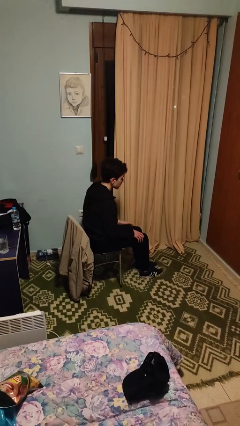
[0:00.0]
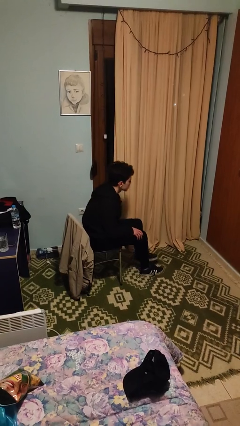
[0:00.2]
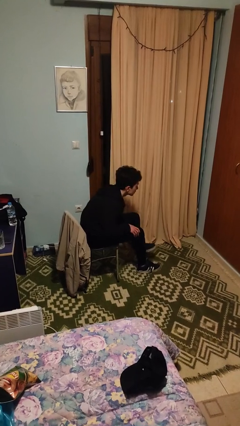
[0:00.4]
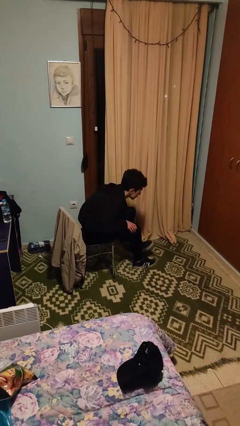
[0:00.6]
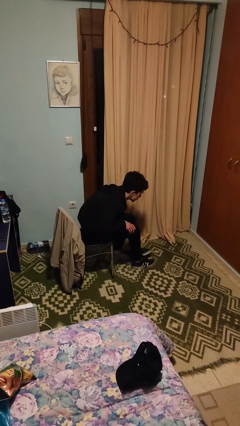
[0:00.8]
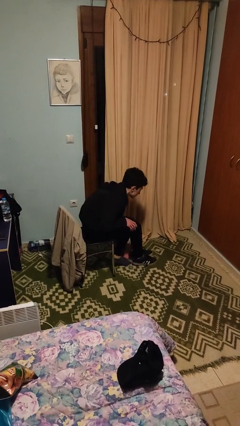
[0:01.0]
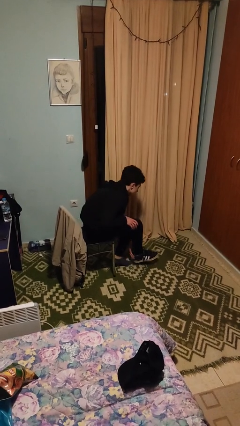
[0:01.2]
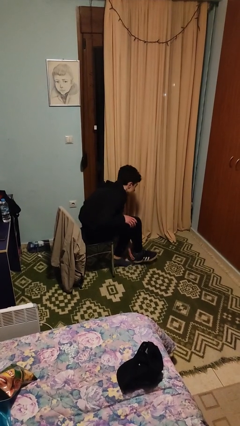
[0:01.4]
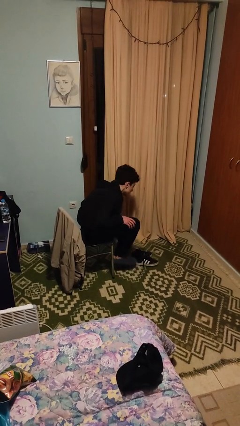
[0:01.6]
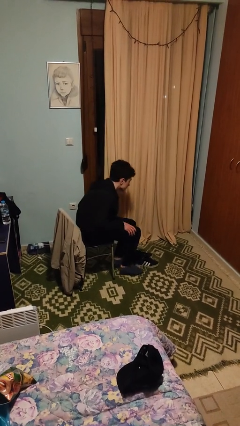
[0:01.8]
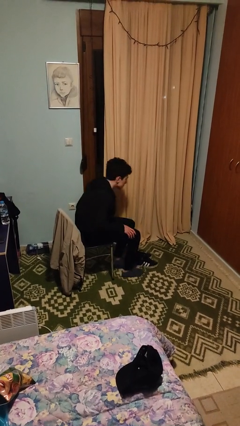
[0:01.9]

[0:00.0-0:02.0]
person takes off shoes

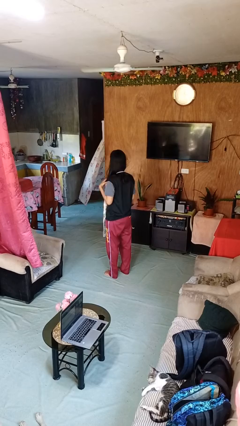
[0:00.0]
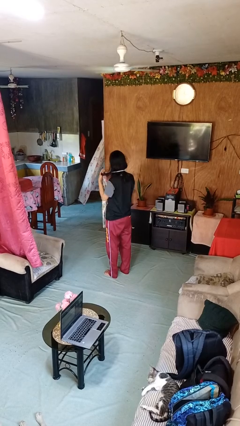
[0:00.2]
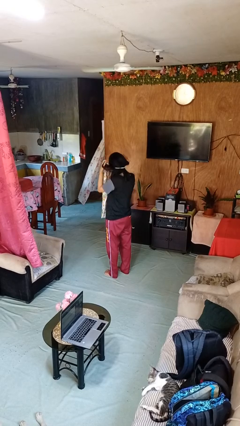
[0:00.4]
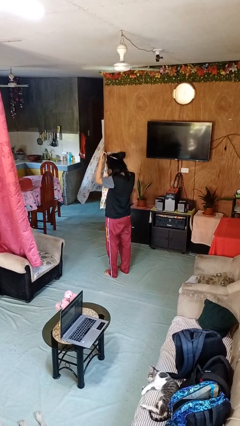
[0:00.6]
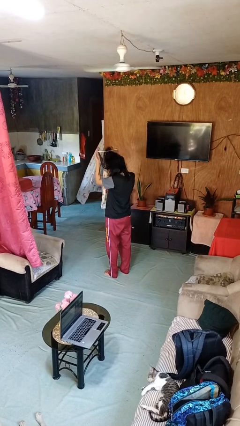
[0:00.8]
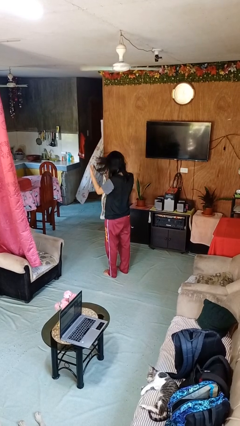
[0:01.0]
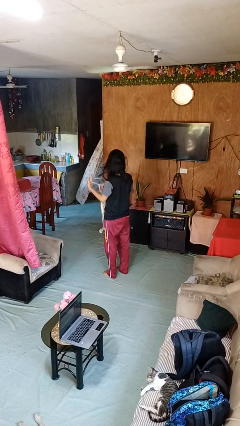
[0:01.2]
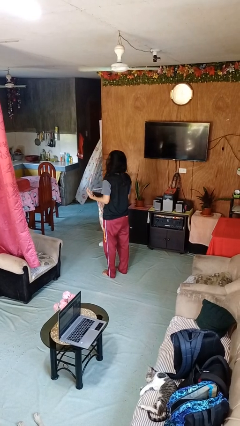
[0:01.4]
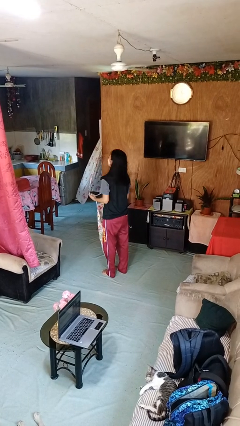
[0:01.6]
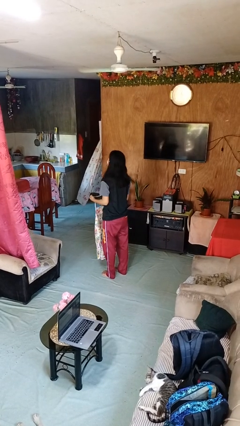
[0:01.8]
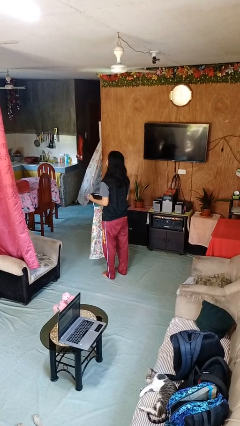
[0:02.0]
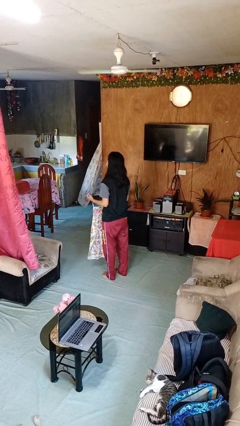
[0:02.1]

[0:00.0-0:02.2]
person takes off apron

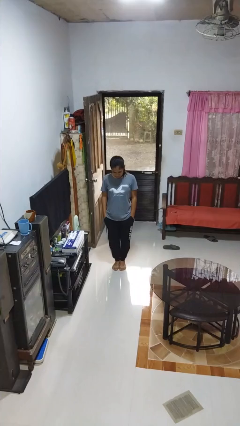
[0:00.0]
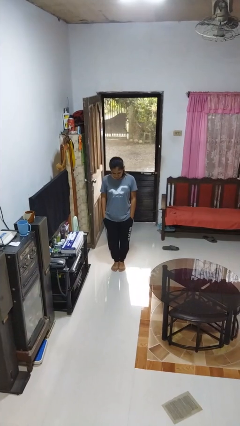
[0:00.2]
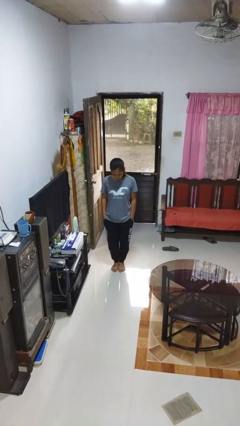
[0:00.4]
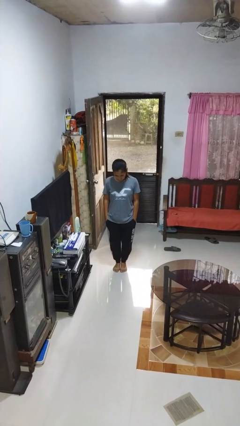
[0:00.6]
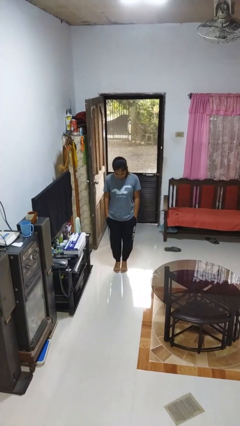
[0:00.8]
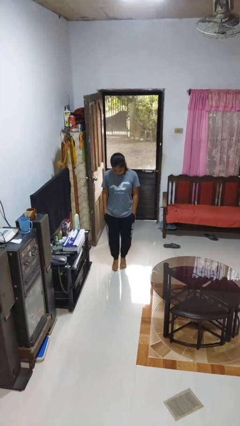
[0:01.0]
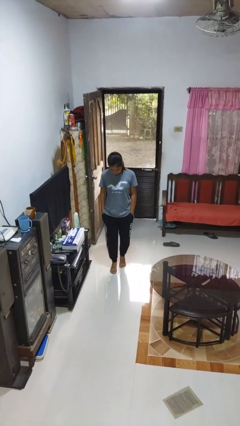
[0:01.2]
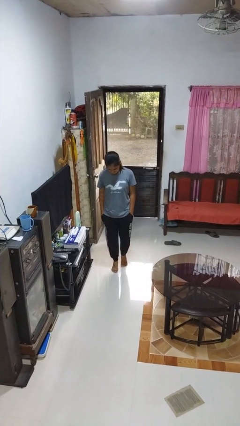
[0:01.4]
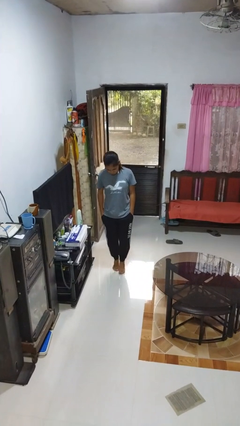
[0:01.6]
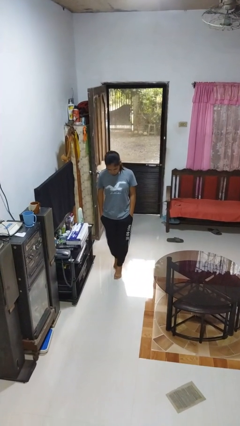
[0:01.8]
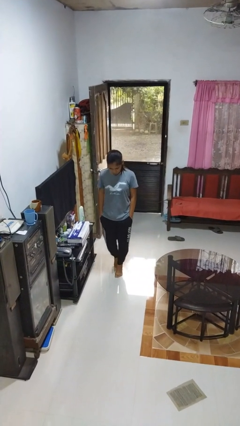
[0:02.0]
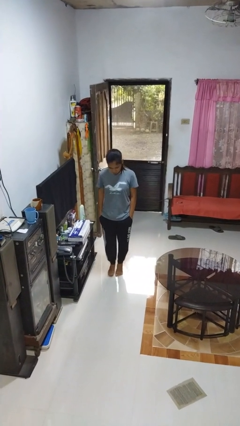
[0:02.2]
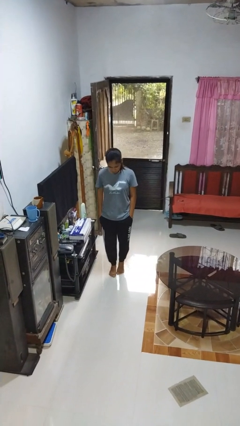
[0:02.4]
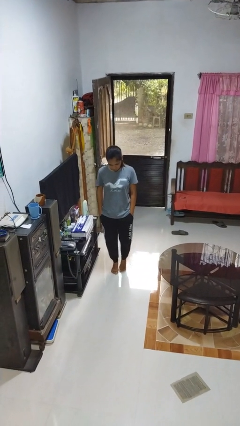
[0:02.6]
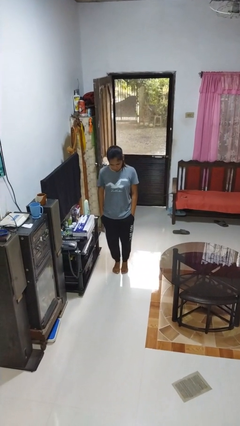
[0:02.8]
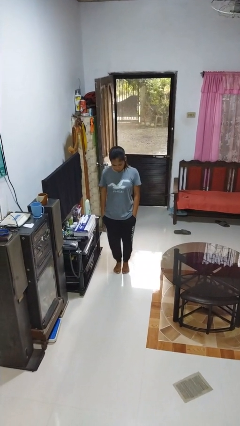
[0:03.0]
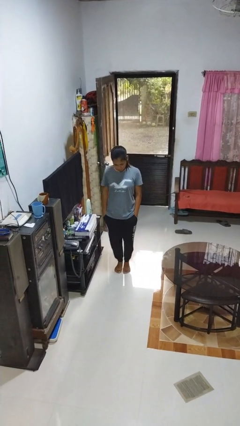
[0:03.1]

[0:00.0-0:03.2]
person walks tiptoe

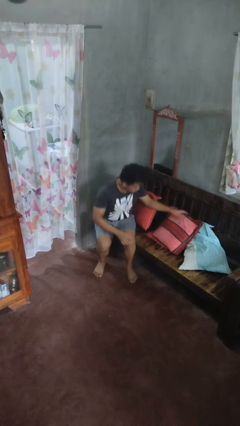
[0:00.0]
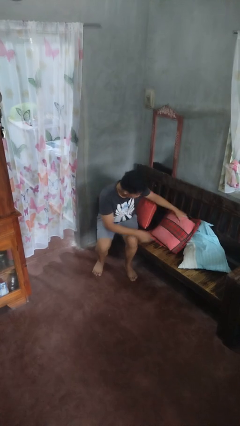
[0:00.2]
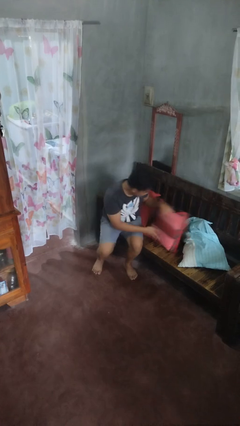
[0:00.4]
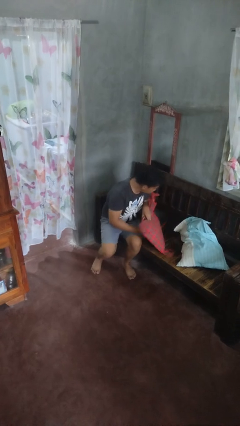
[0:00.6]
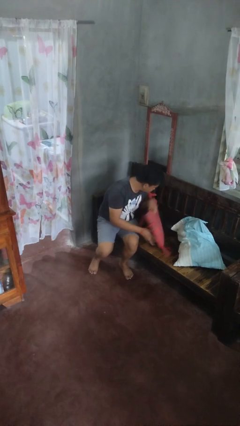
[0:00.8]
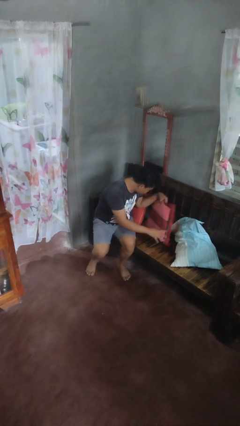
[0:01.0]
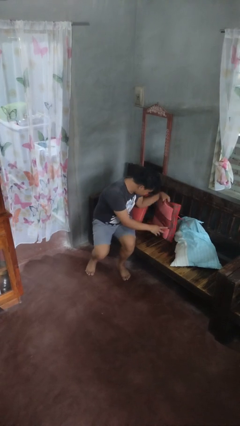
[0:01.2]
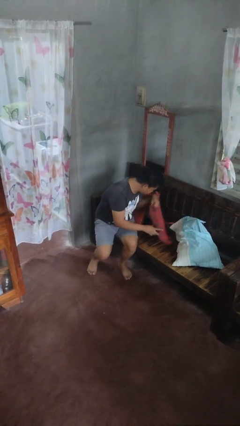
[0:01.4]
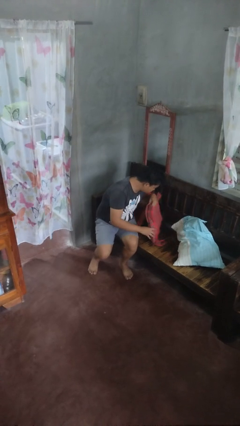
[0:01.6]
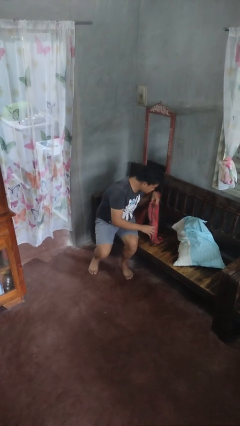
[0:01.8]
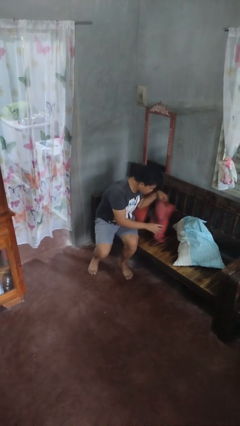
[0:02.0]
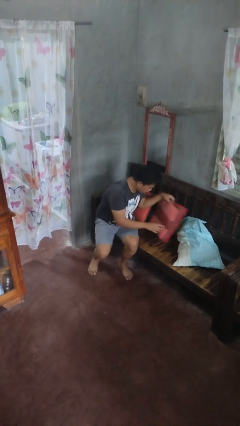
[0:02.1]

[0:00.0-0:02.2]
person searches in couch

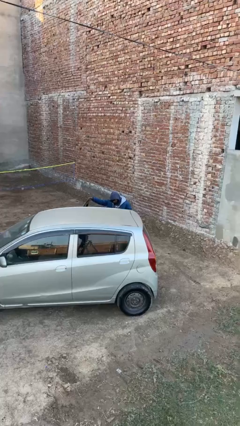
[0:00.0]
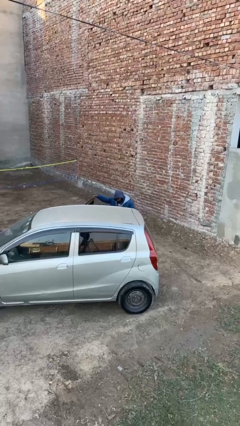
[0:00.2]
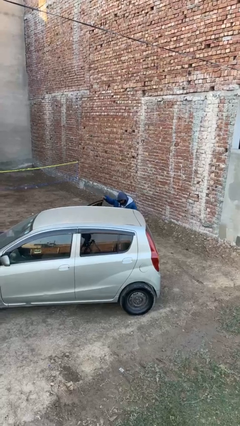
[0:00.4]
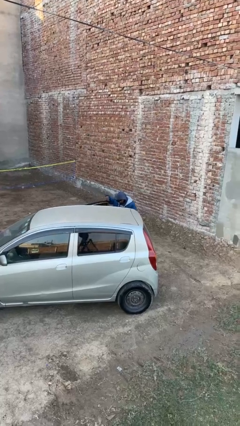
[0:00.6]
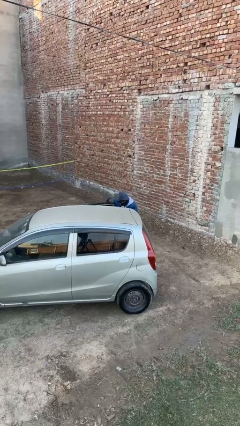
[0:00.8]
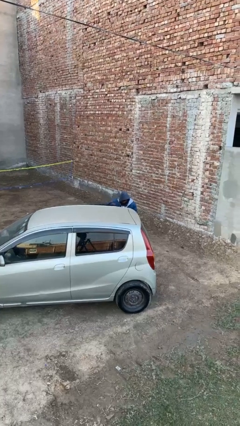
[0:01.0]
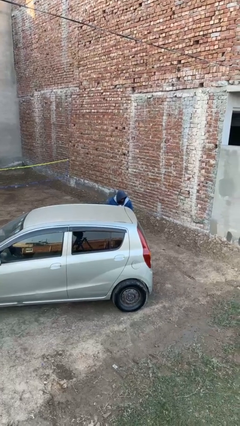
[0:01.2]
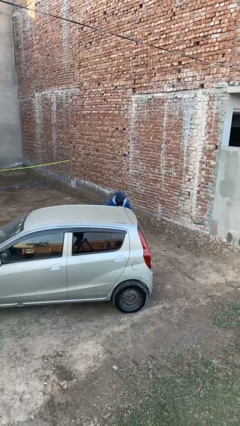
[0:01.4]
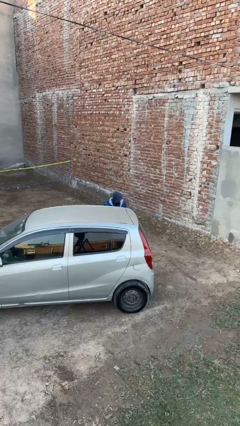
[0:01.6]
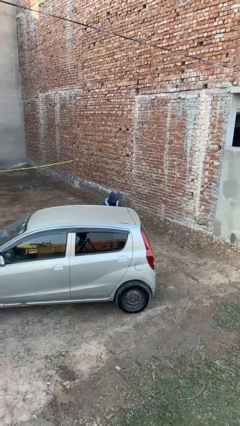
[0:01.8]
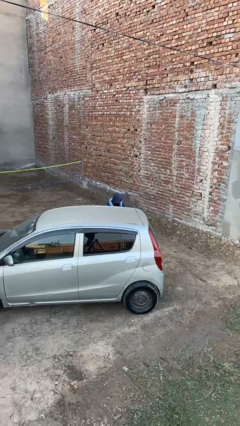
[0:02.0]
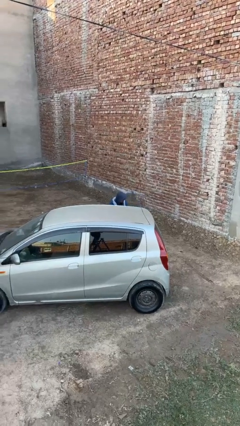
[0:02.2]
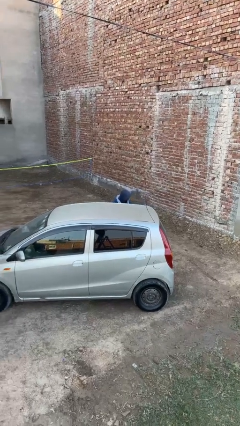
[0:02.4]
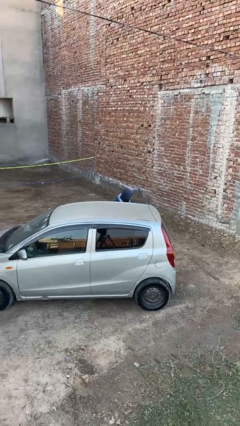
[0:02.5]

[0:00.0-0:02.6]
person closes car door

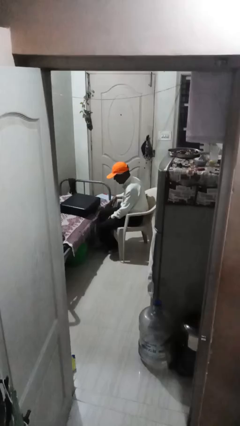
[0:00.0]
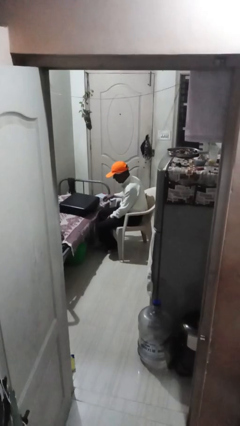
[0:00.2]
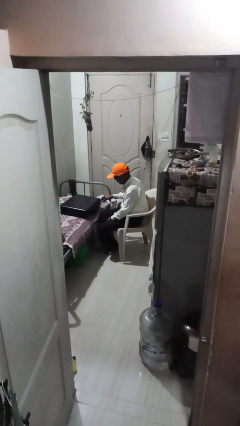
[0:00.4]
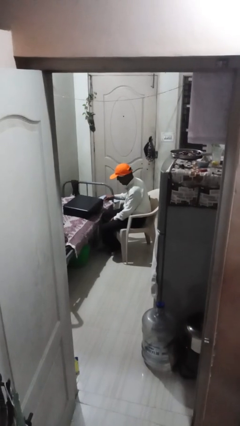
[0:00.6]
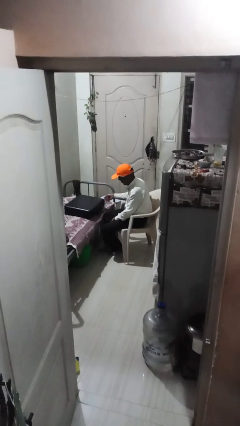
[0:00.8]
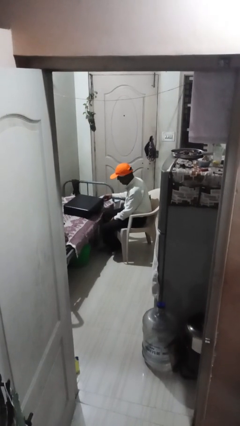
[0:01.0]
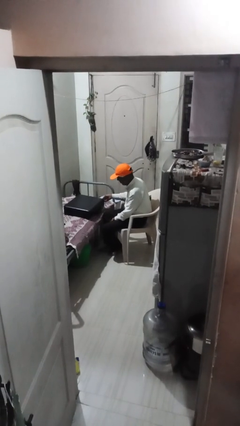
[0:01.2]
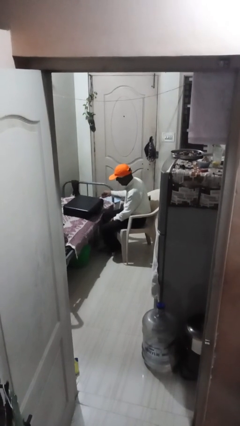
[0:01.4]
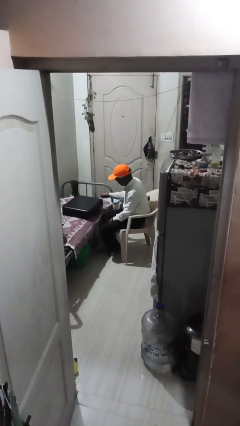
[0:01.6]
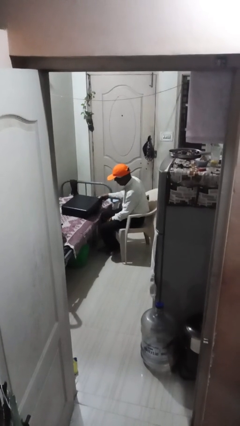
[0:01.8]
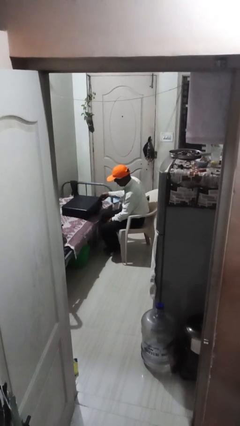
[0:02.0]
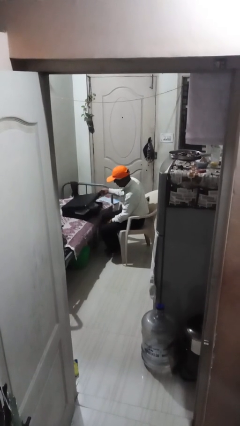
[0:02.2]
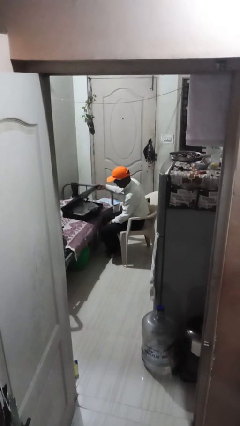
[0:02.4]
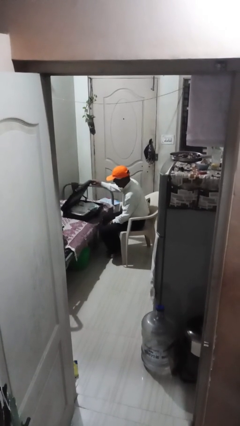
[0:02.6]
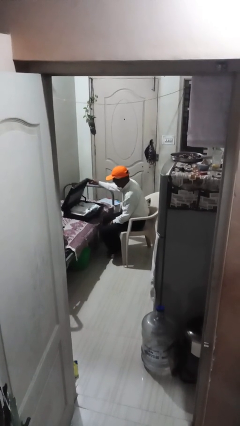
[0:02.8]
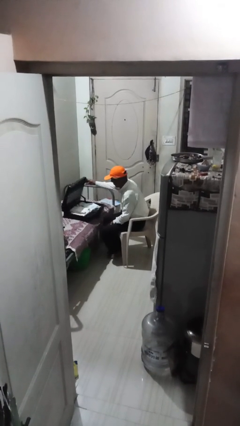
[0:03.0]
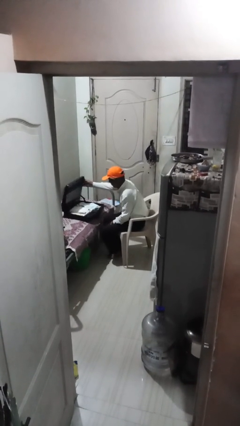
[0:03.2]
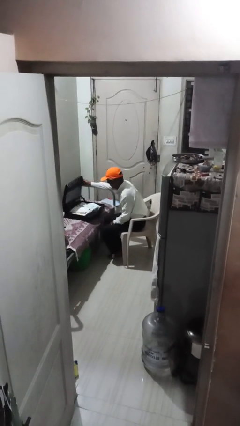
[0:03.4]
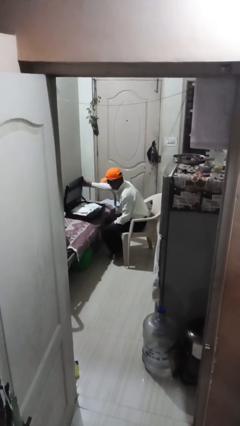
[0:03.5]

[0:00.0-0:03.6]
person opens suitcase

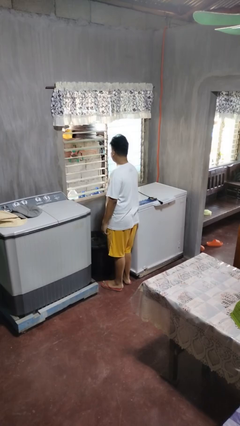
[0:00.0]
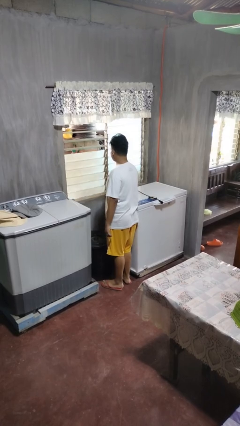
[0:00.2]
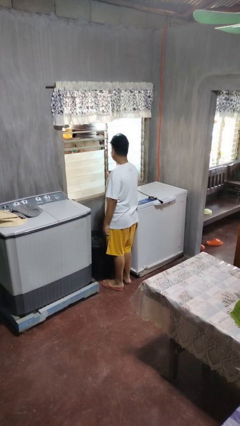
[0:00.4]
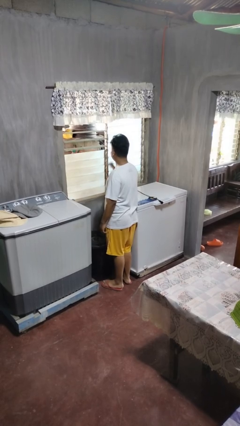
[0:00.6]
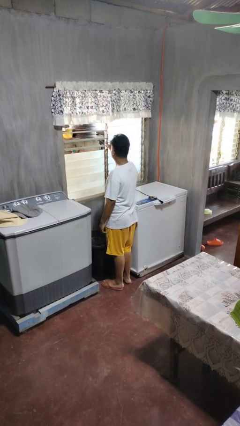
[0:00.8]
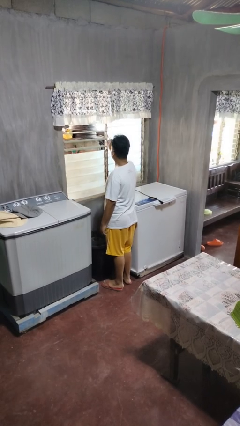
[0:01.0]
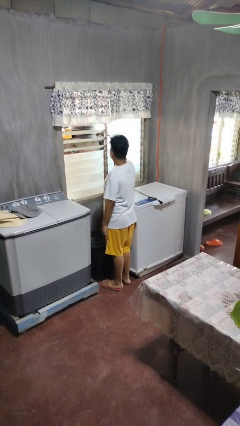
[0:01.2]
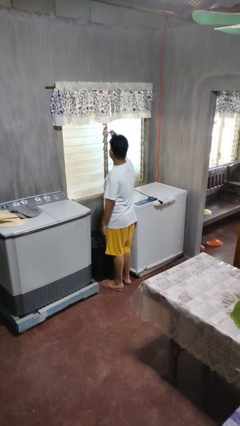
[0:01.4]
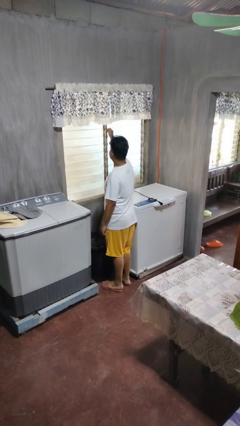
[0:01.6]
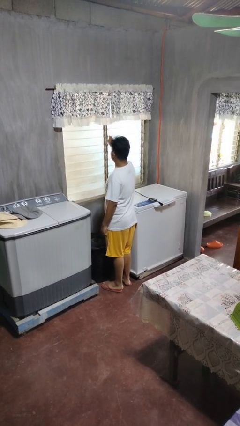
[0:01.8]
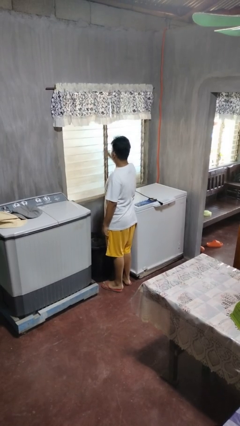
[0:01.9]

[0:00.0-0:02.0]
person closes home window
